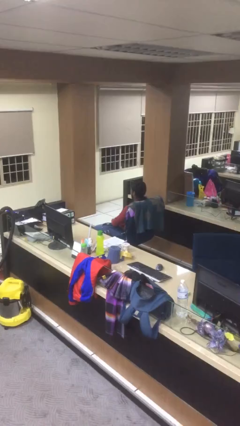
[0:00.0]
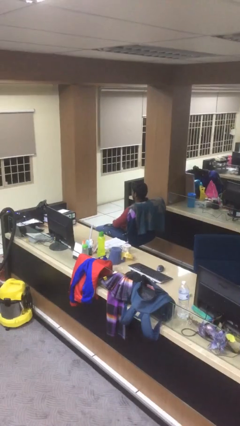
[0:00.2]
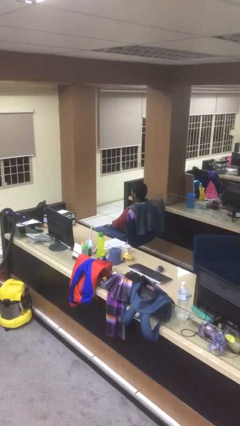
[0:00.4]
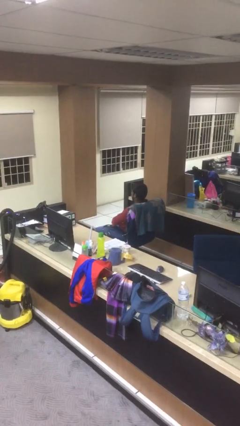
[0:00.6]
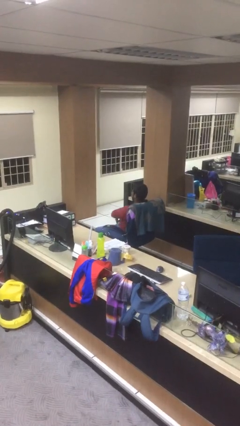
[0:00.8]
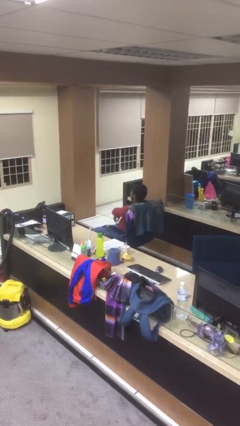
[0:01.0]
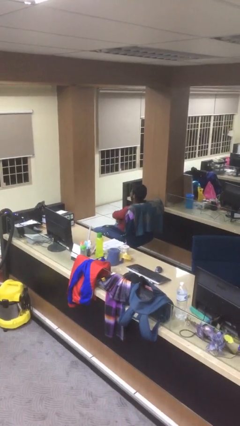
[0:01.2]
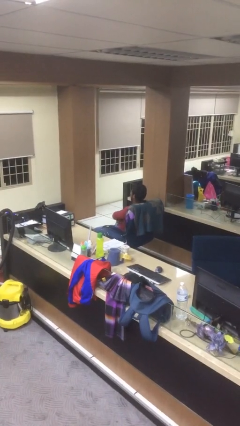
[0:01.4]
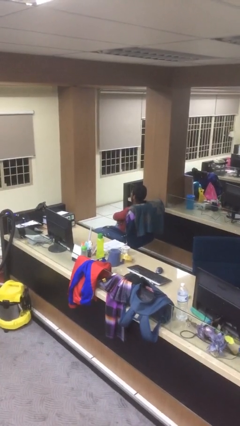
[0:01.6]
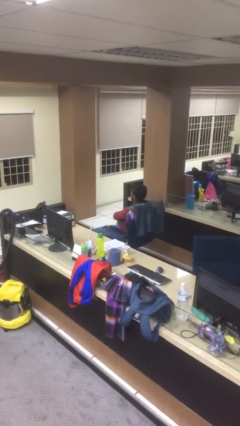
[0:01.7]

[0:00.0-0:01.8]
person crosses arms

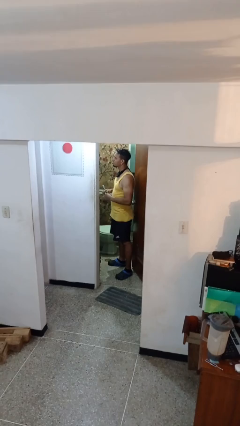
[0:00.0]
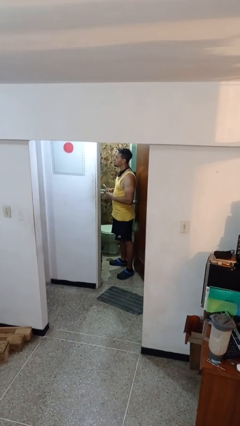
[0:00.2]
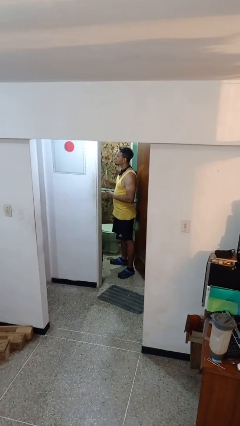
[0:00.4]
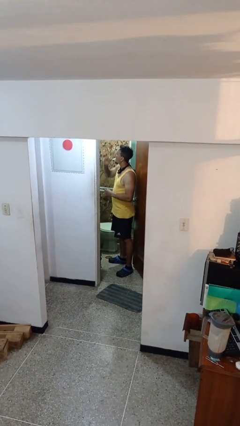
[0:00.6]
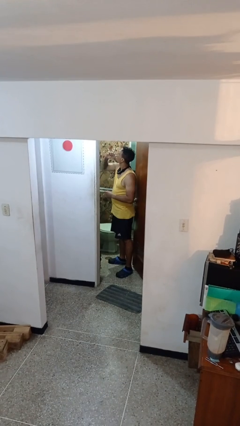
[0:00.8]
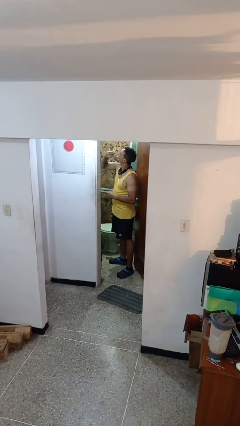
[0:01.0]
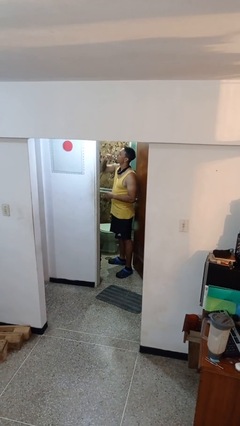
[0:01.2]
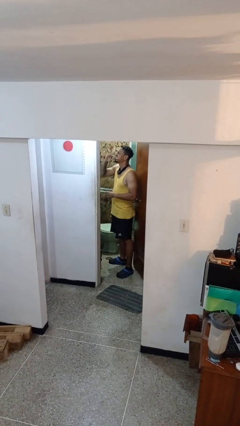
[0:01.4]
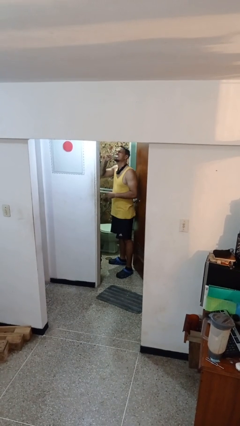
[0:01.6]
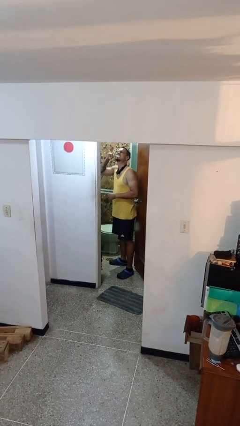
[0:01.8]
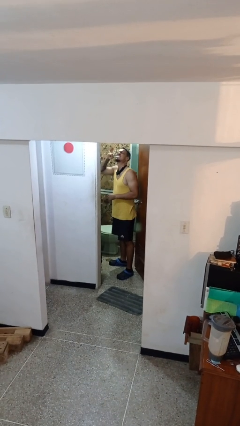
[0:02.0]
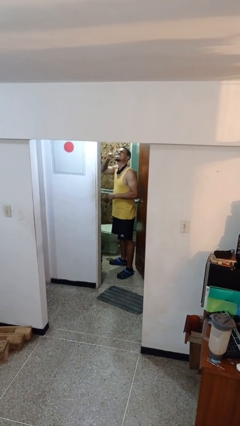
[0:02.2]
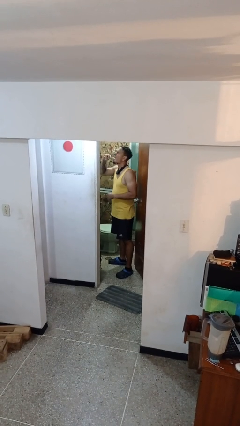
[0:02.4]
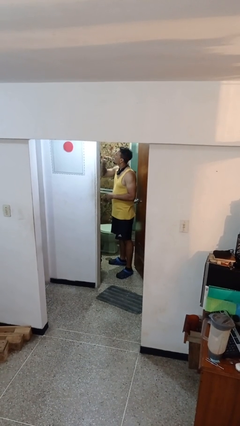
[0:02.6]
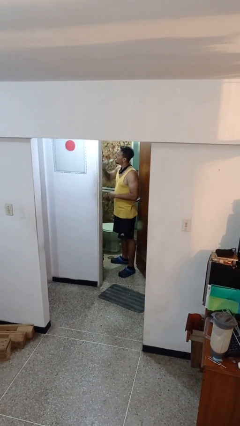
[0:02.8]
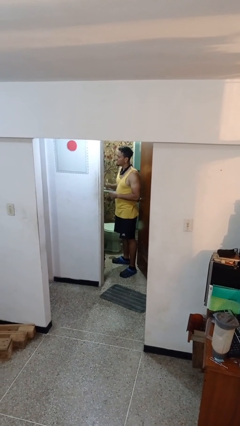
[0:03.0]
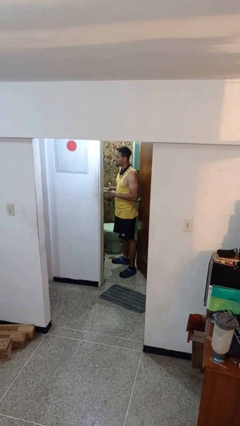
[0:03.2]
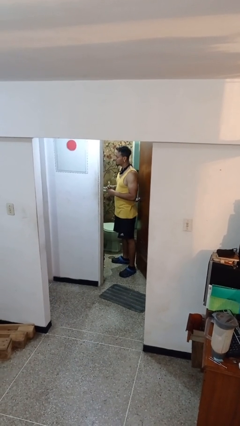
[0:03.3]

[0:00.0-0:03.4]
person brushes teeth

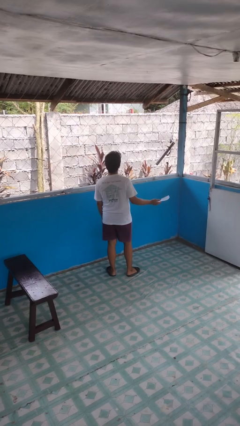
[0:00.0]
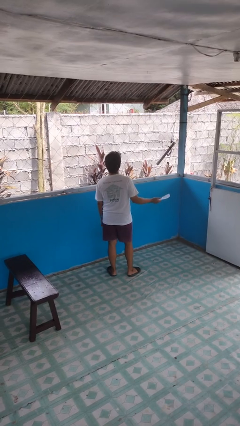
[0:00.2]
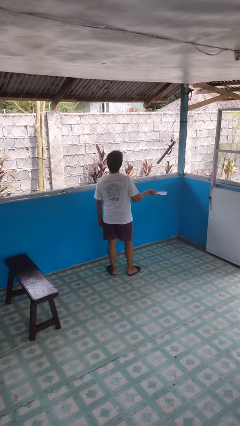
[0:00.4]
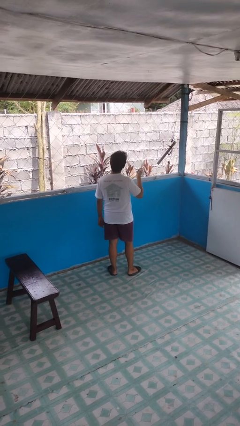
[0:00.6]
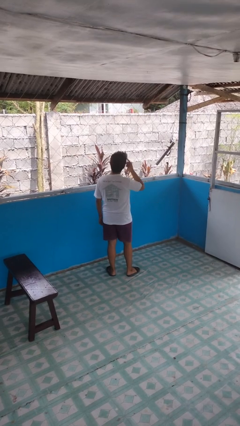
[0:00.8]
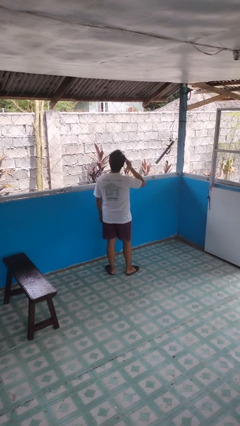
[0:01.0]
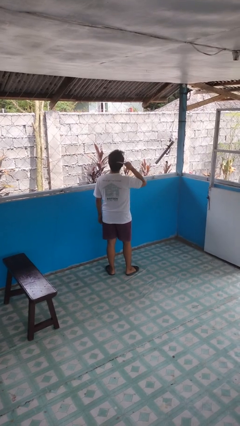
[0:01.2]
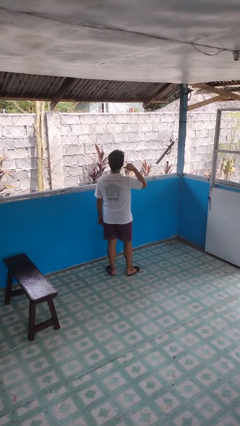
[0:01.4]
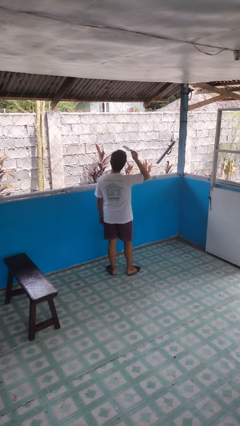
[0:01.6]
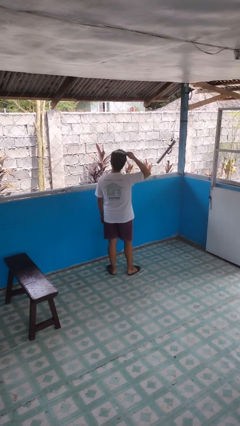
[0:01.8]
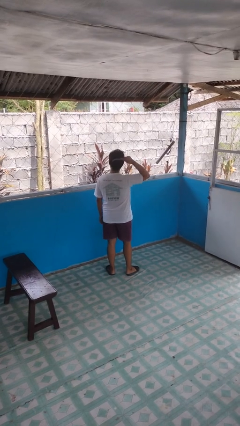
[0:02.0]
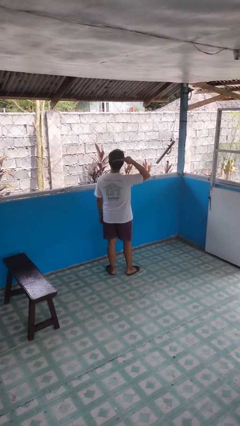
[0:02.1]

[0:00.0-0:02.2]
person brushes hair

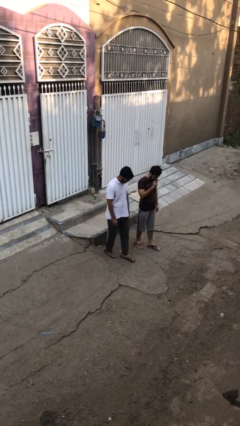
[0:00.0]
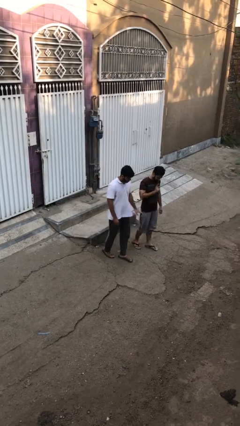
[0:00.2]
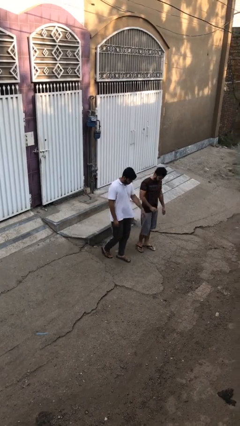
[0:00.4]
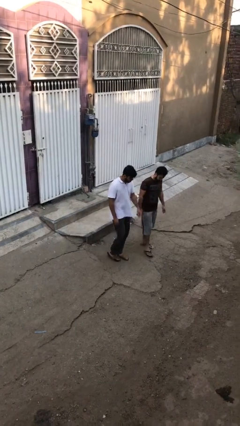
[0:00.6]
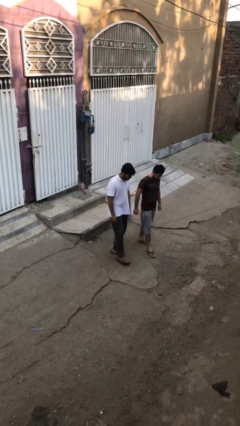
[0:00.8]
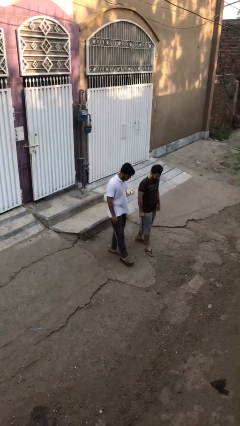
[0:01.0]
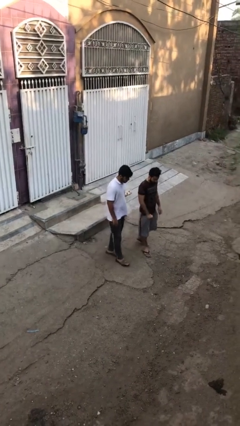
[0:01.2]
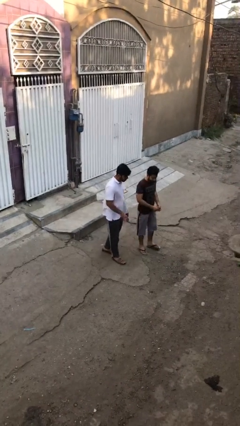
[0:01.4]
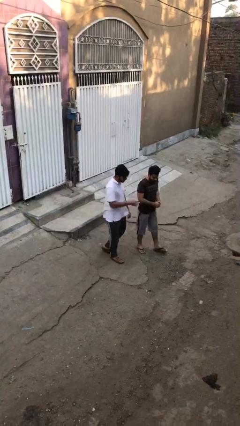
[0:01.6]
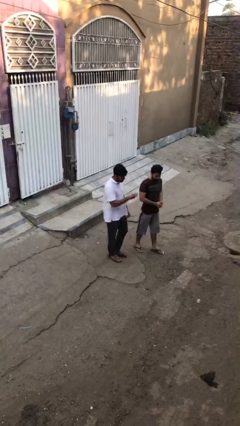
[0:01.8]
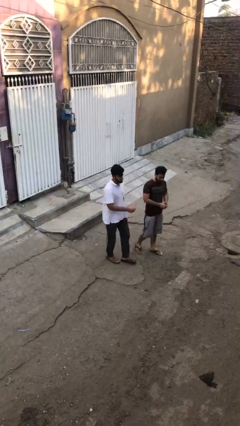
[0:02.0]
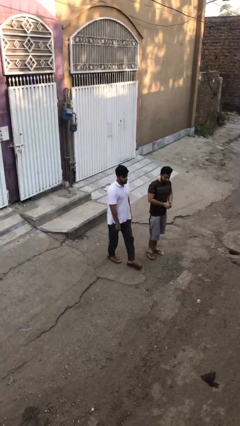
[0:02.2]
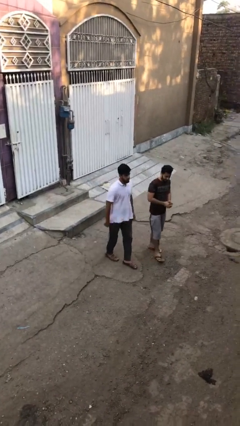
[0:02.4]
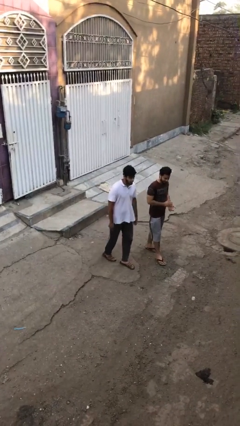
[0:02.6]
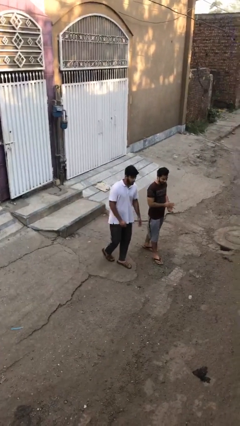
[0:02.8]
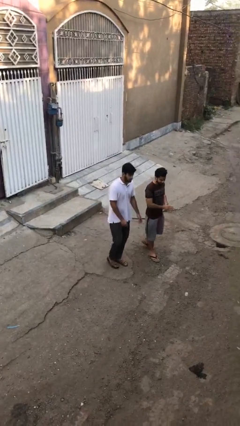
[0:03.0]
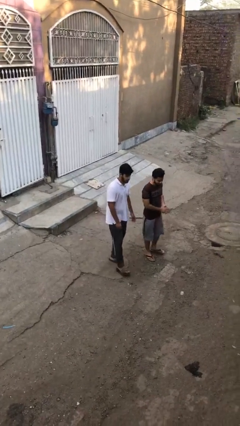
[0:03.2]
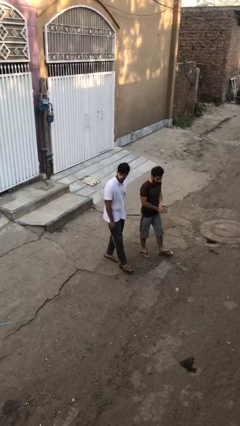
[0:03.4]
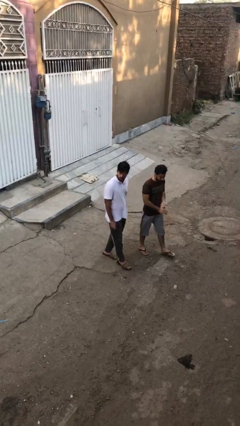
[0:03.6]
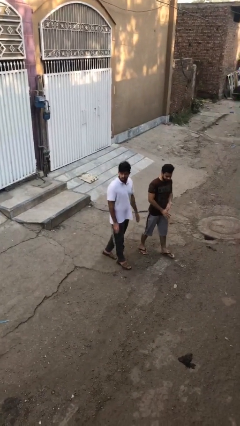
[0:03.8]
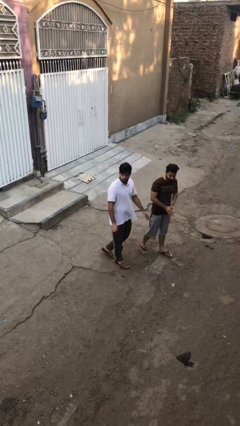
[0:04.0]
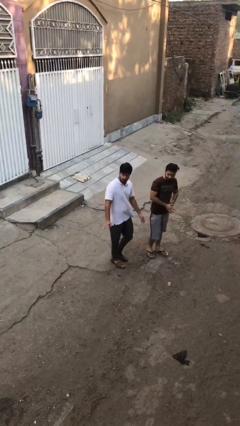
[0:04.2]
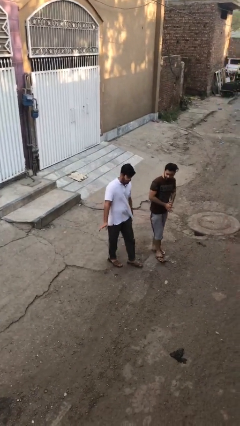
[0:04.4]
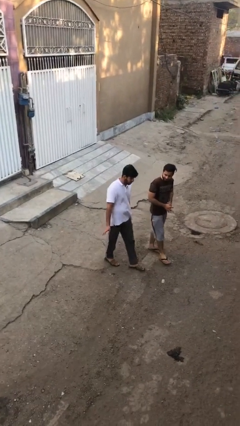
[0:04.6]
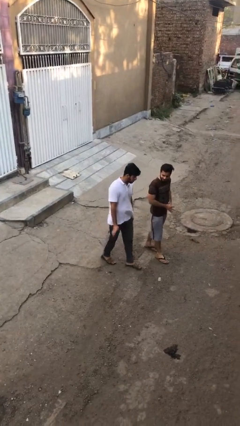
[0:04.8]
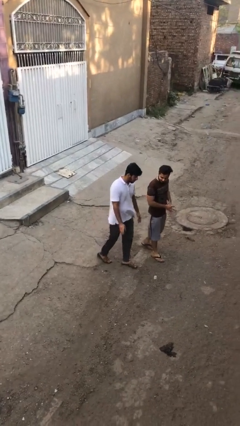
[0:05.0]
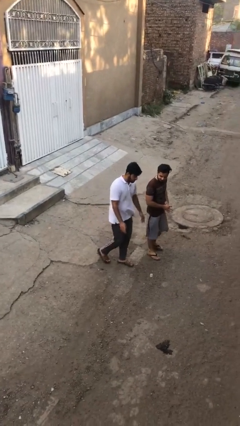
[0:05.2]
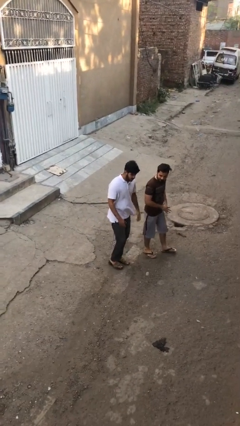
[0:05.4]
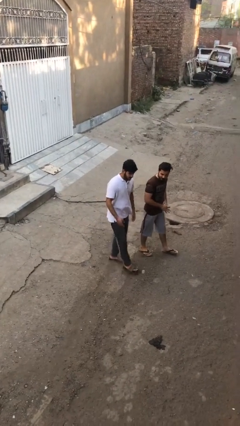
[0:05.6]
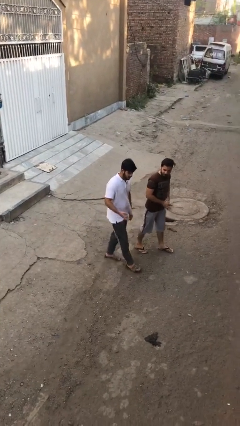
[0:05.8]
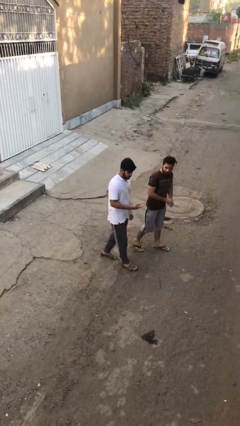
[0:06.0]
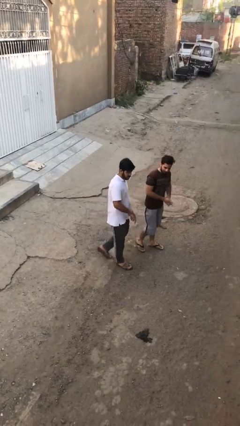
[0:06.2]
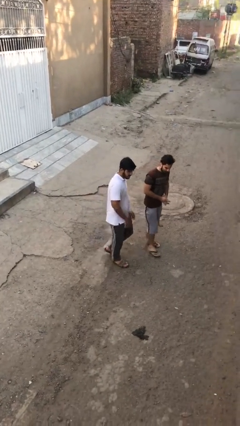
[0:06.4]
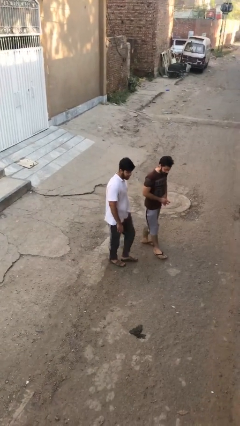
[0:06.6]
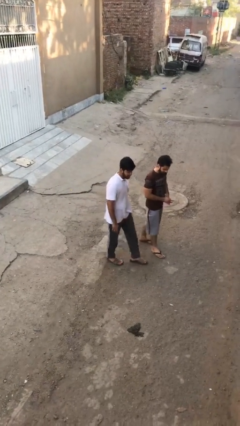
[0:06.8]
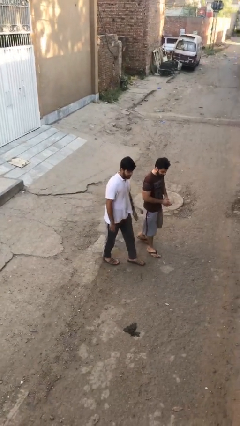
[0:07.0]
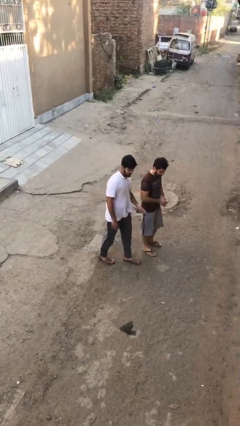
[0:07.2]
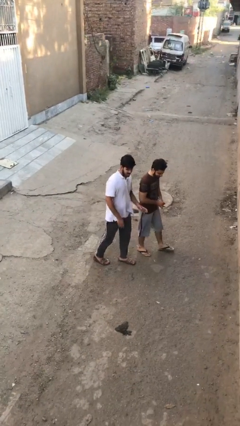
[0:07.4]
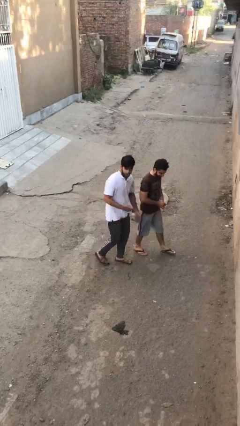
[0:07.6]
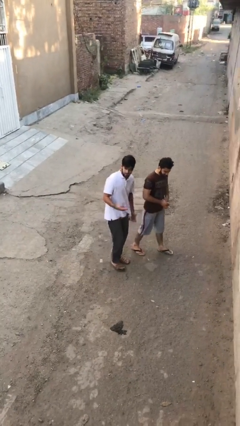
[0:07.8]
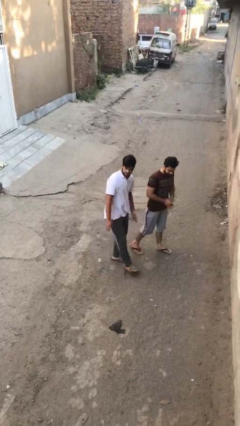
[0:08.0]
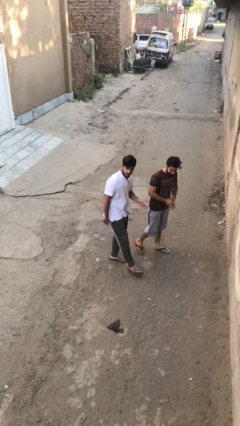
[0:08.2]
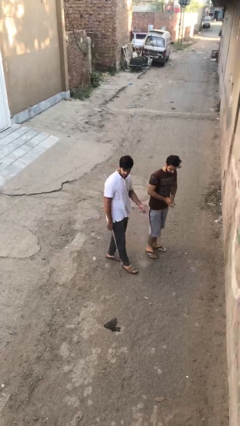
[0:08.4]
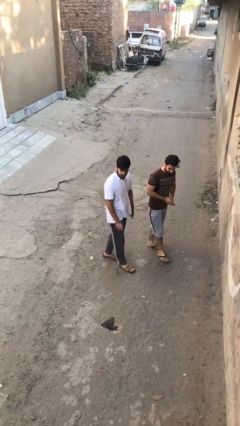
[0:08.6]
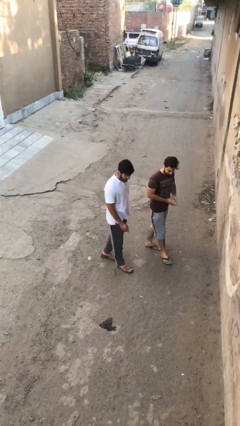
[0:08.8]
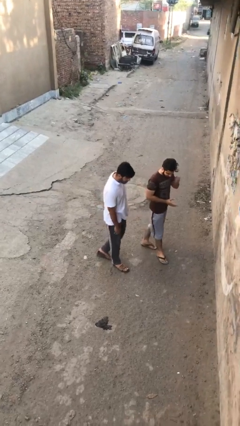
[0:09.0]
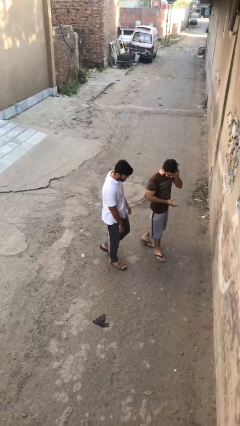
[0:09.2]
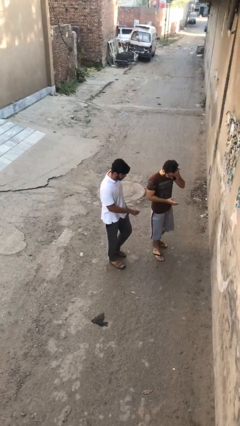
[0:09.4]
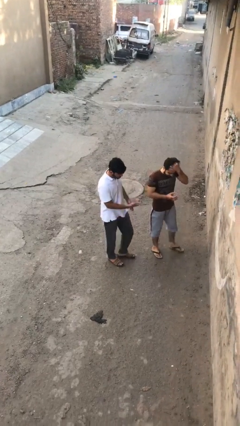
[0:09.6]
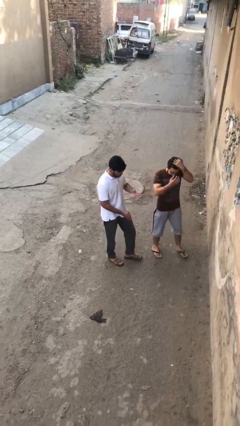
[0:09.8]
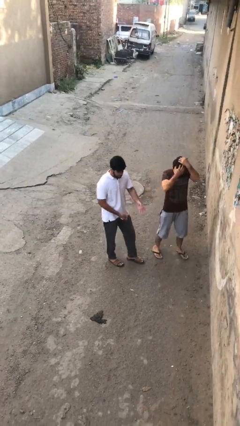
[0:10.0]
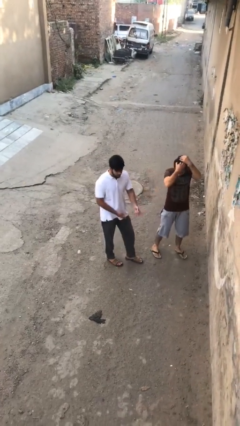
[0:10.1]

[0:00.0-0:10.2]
person talks to person
